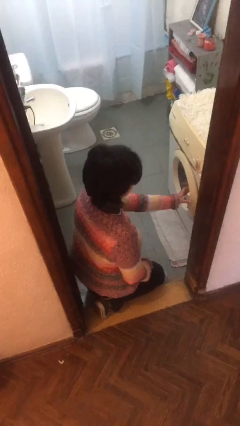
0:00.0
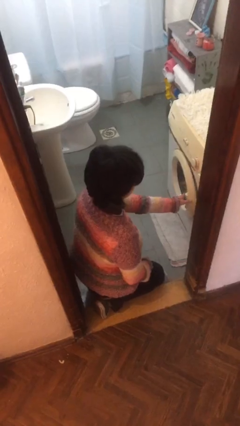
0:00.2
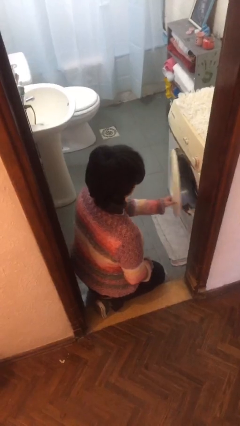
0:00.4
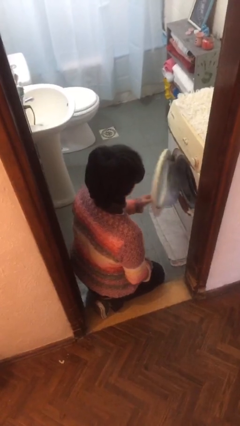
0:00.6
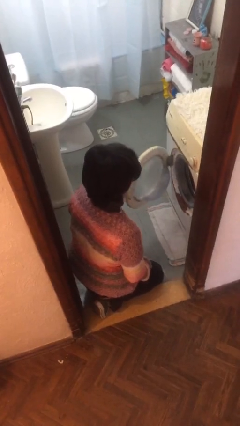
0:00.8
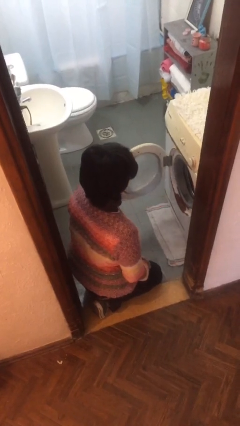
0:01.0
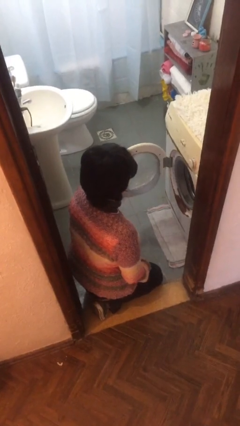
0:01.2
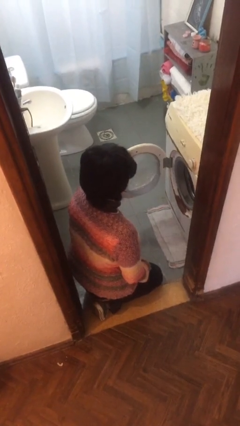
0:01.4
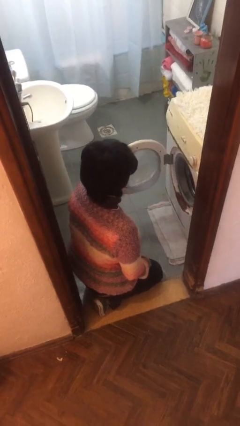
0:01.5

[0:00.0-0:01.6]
person opens clothes washer

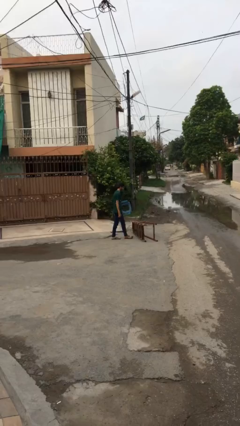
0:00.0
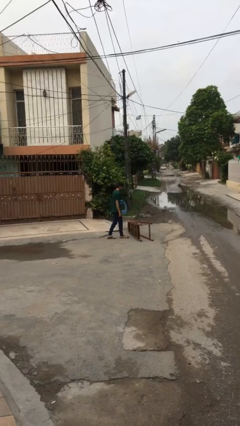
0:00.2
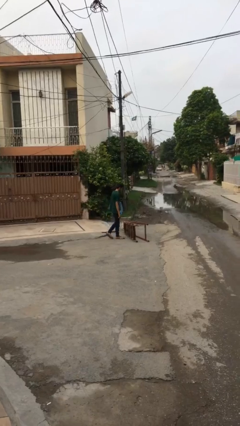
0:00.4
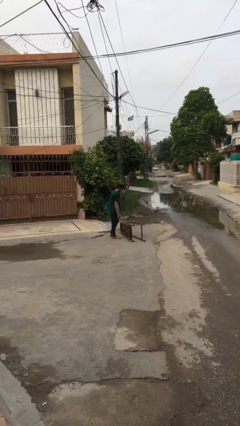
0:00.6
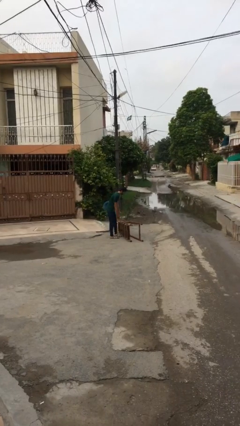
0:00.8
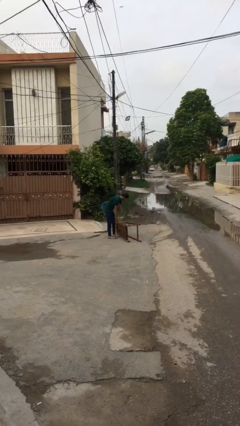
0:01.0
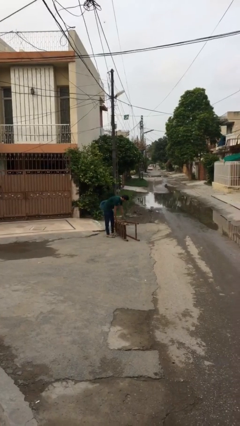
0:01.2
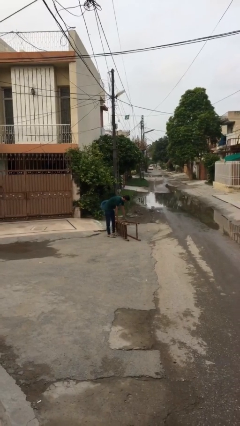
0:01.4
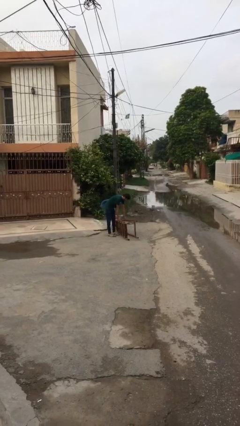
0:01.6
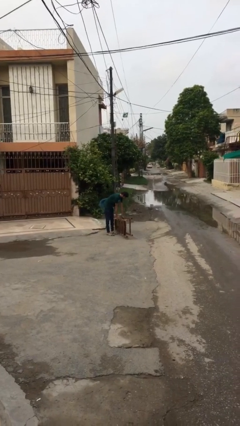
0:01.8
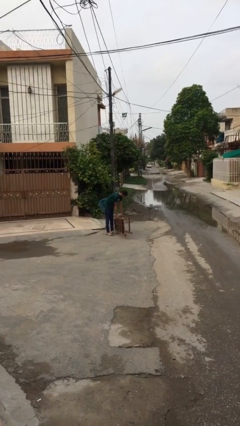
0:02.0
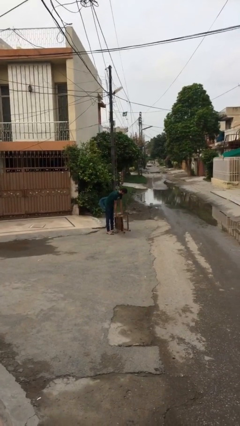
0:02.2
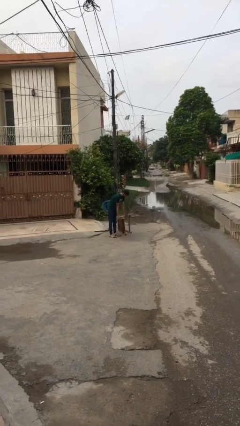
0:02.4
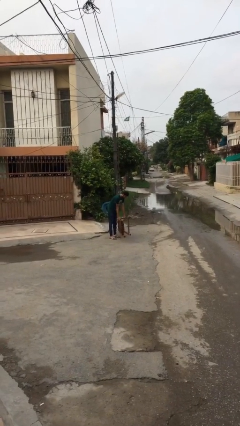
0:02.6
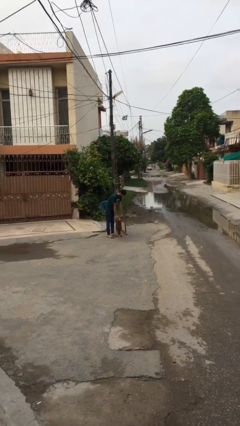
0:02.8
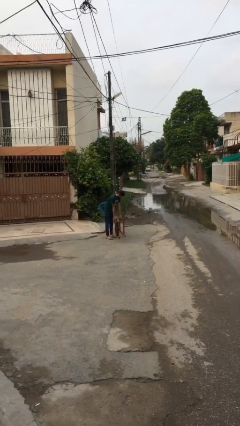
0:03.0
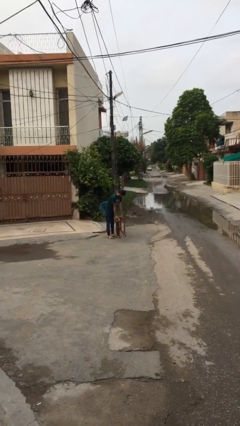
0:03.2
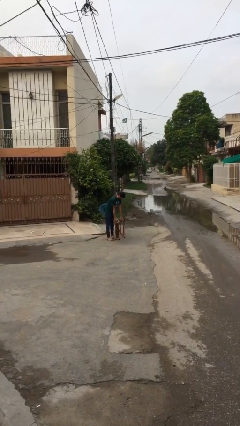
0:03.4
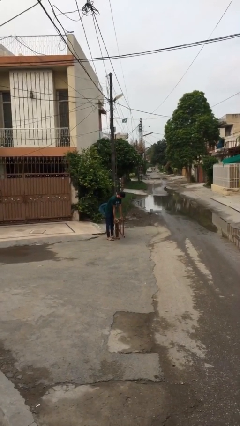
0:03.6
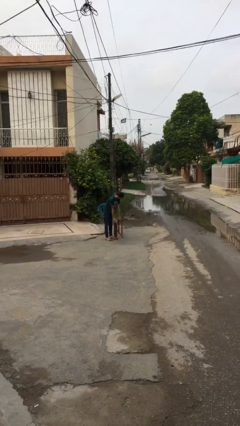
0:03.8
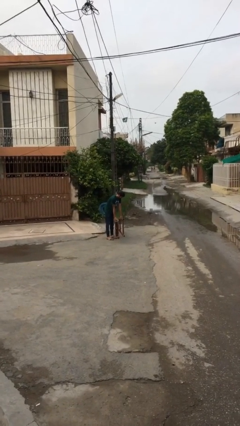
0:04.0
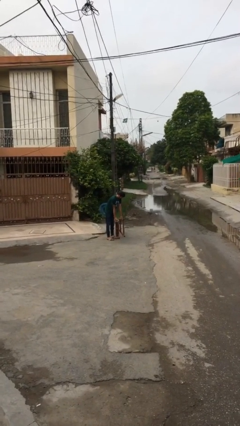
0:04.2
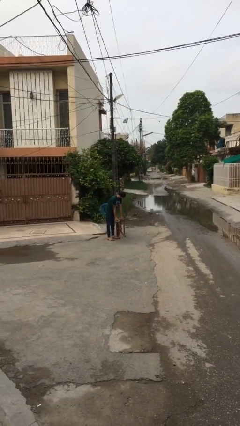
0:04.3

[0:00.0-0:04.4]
person picks up object from floor

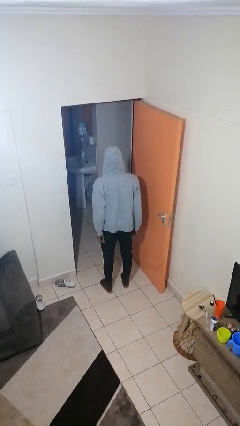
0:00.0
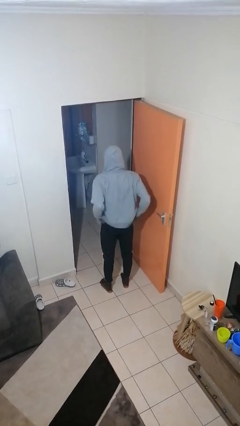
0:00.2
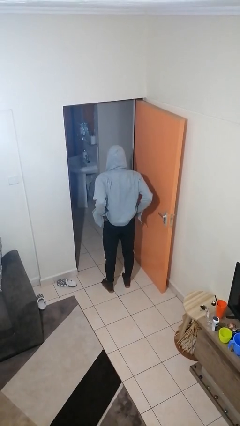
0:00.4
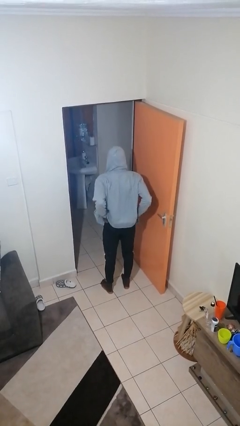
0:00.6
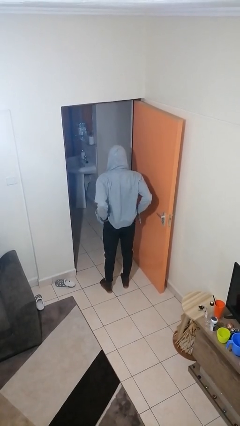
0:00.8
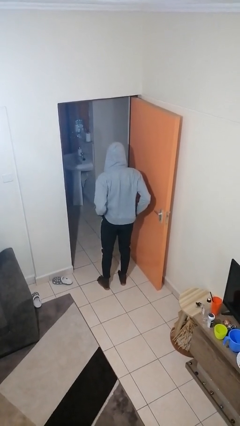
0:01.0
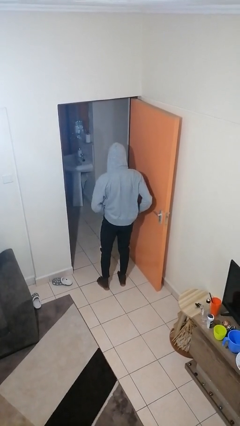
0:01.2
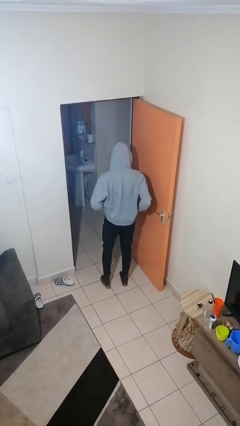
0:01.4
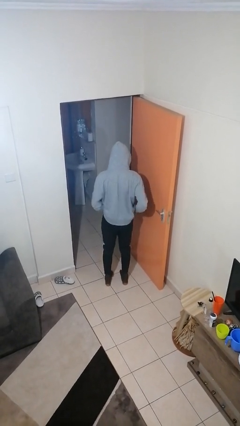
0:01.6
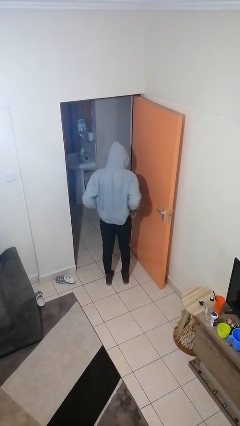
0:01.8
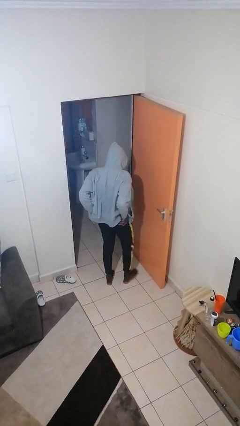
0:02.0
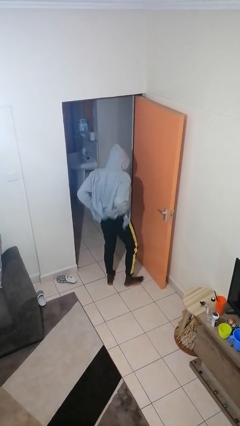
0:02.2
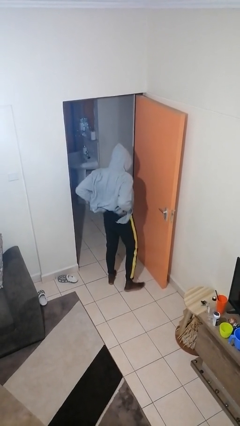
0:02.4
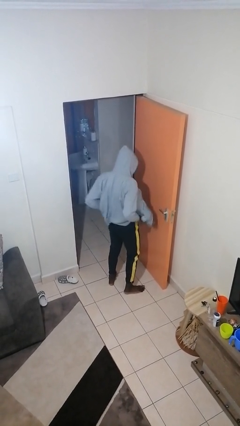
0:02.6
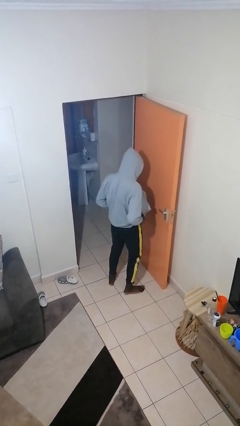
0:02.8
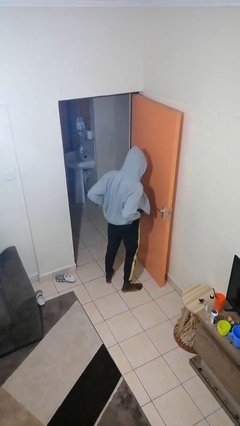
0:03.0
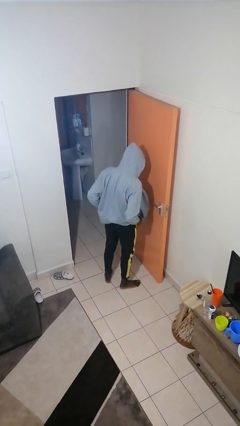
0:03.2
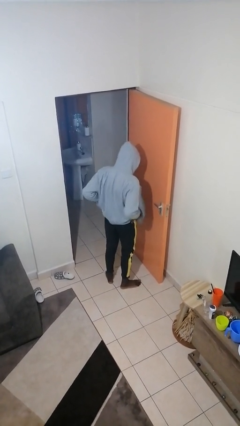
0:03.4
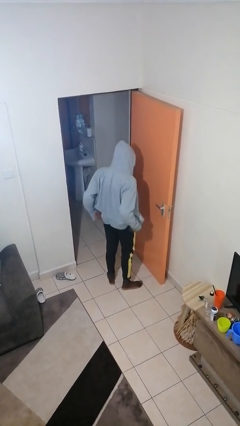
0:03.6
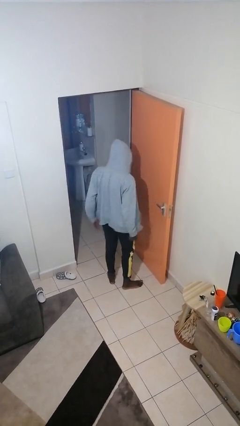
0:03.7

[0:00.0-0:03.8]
person hikes up pants

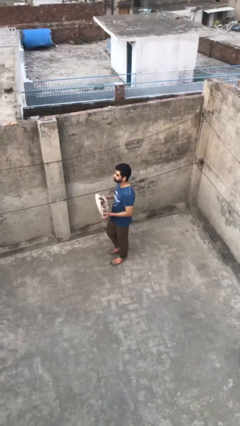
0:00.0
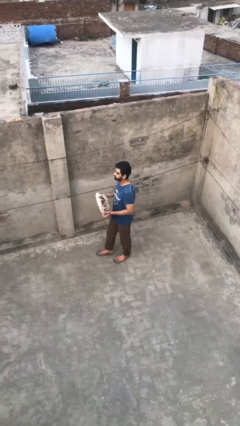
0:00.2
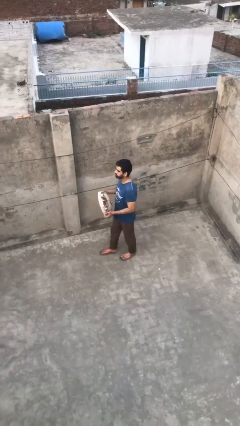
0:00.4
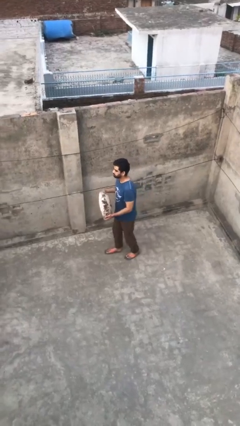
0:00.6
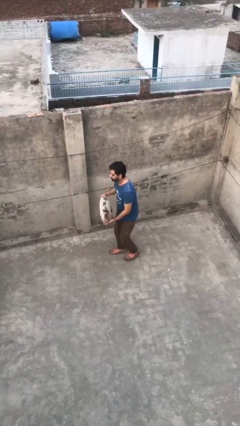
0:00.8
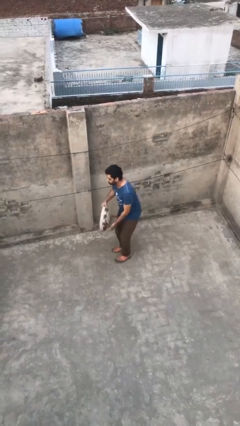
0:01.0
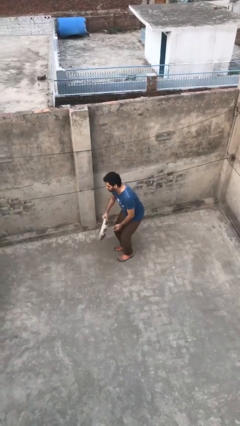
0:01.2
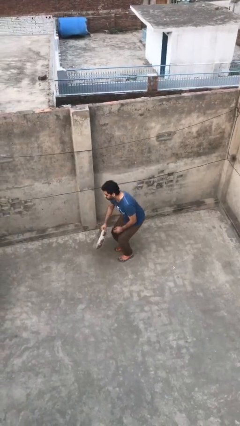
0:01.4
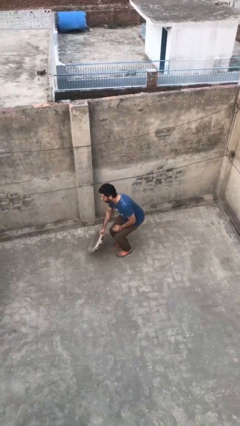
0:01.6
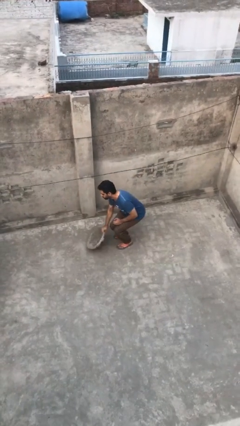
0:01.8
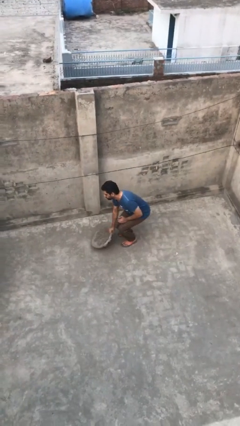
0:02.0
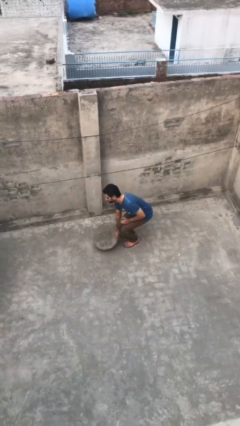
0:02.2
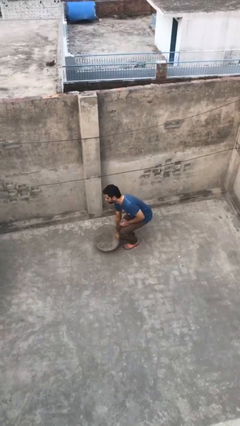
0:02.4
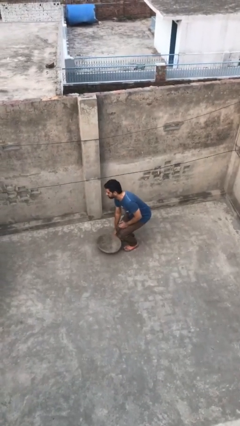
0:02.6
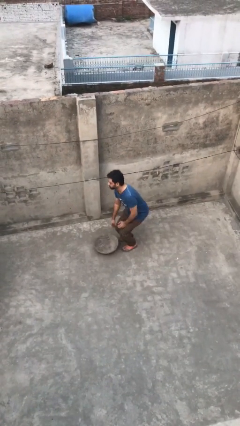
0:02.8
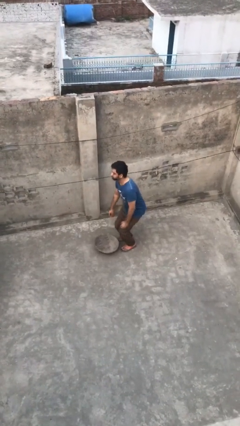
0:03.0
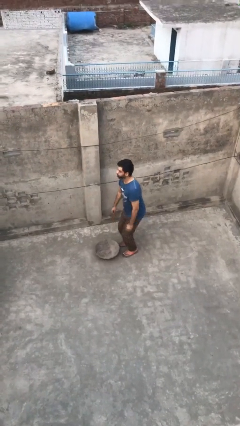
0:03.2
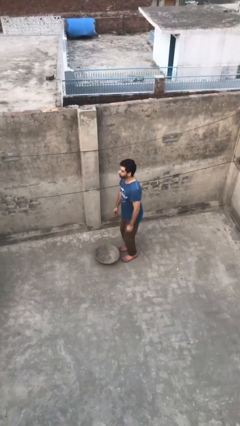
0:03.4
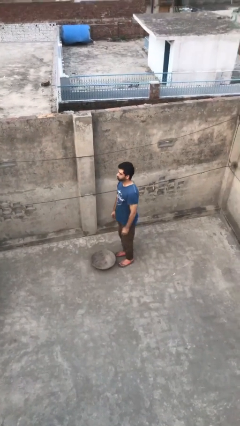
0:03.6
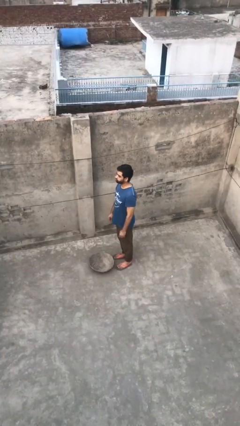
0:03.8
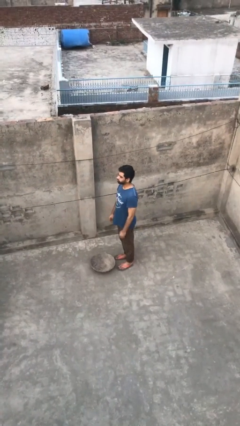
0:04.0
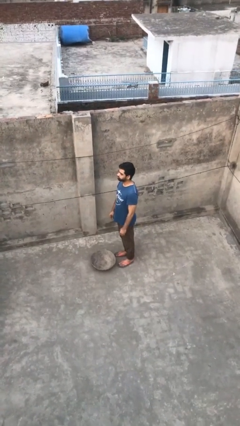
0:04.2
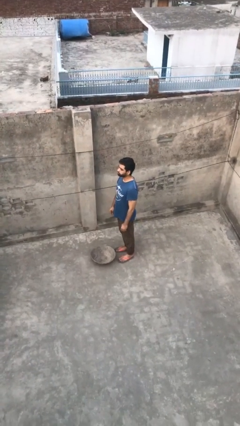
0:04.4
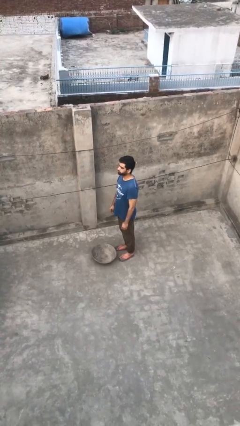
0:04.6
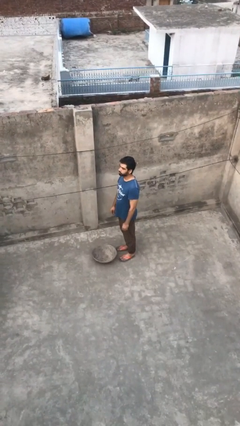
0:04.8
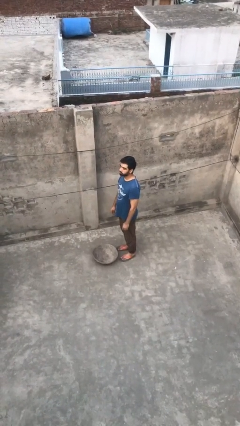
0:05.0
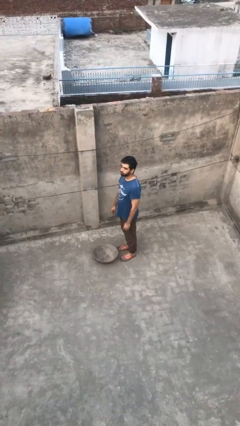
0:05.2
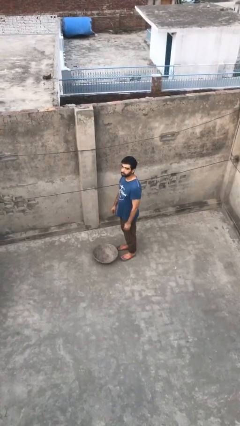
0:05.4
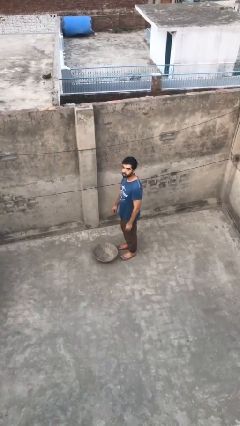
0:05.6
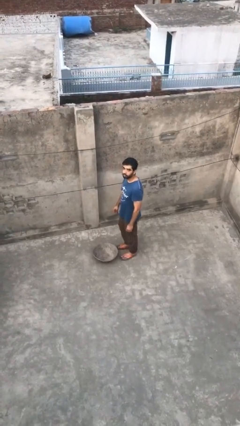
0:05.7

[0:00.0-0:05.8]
person puts down object on floor

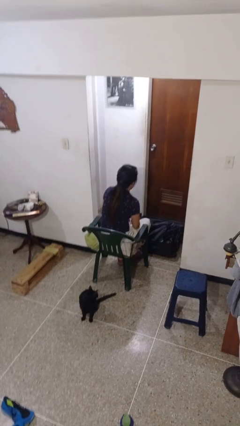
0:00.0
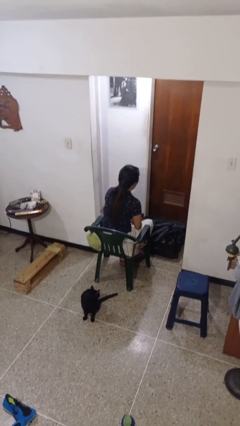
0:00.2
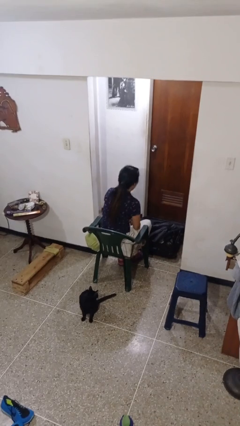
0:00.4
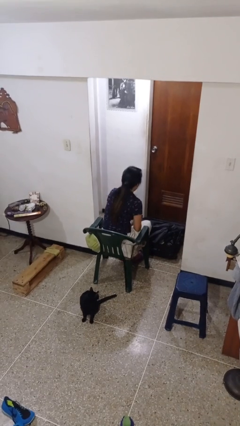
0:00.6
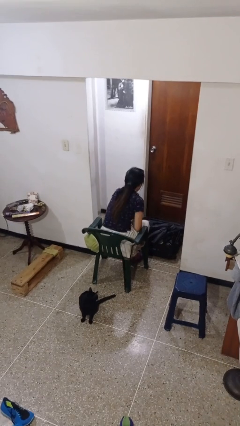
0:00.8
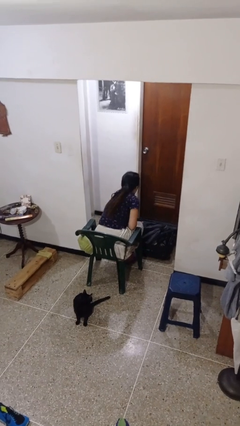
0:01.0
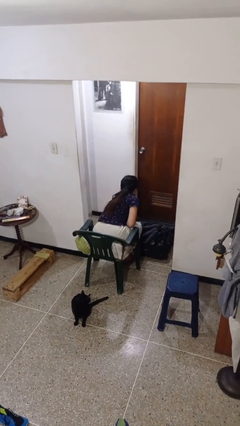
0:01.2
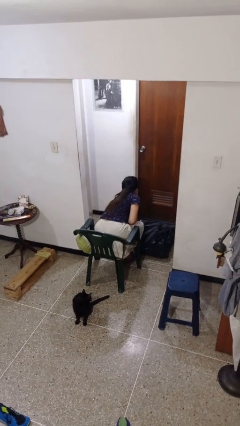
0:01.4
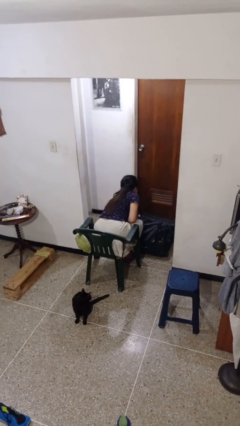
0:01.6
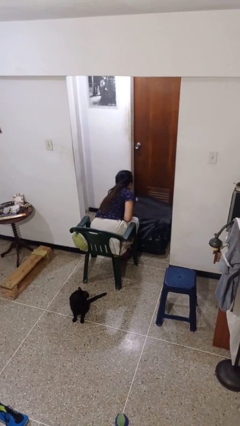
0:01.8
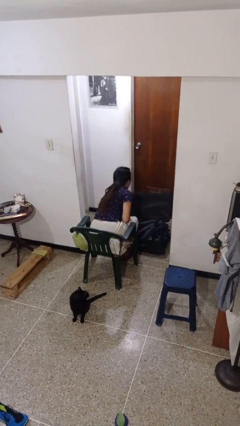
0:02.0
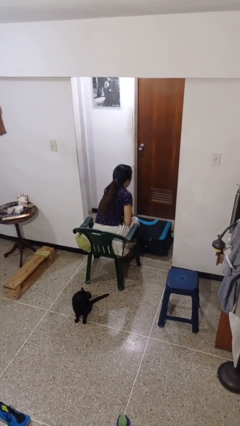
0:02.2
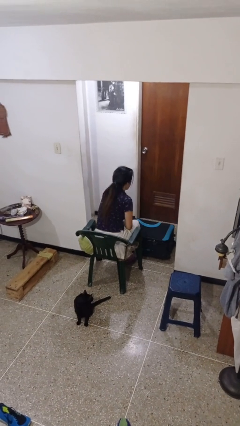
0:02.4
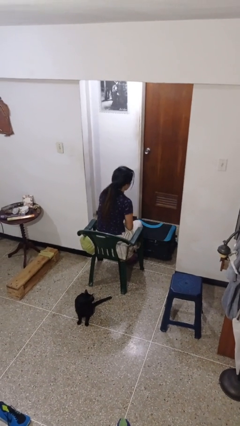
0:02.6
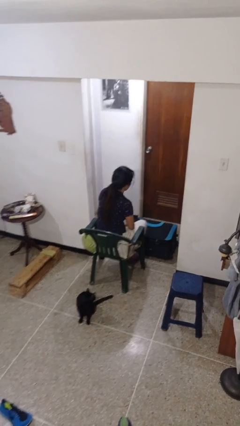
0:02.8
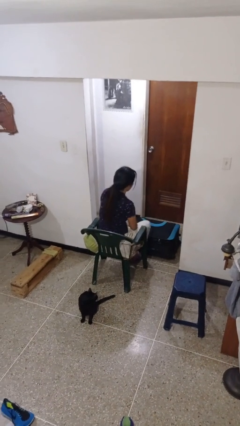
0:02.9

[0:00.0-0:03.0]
person closes suitcase
